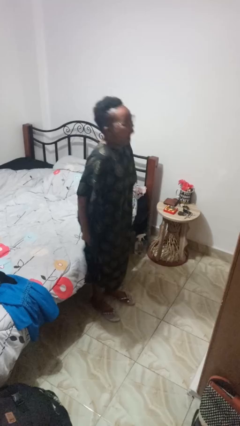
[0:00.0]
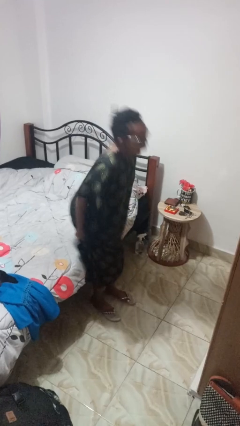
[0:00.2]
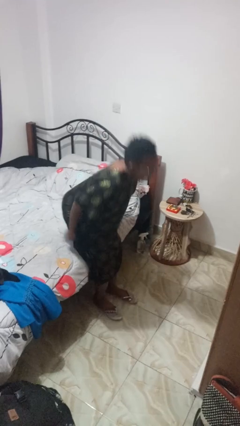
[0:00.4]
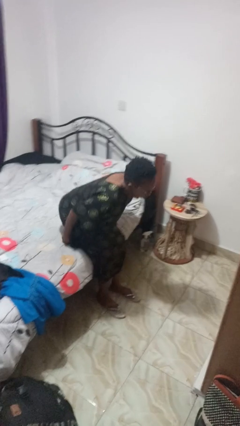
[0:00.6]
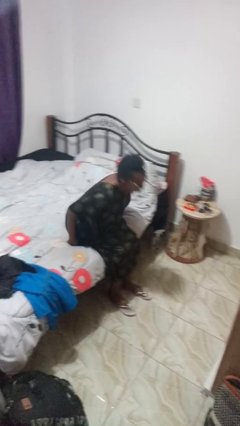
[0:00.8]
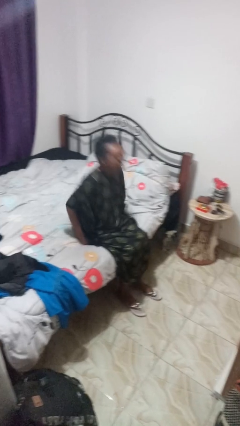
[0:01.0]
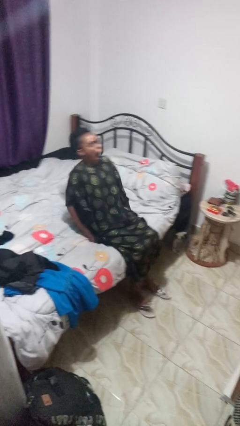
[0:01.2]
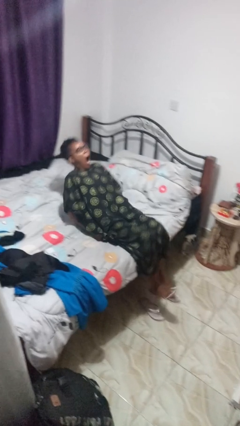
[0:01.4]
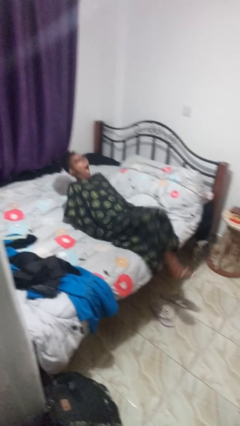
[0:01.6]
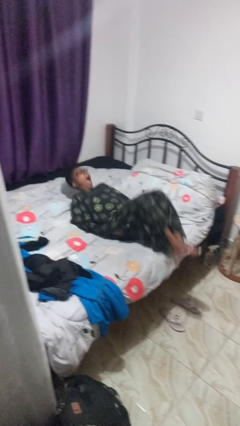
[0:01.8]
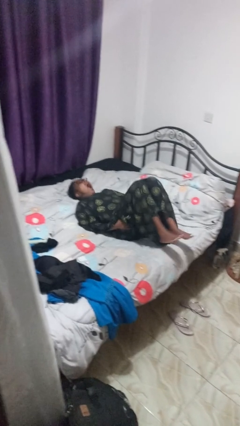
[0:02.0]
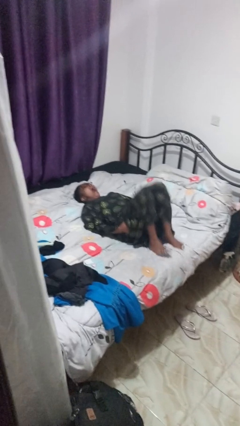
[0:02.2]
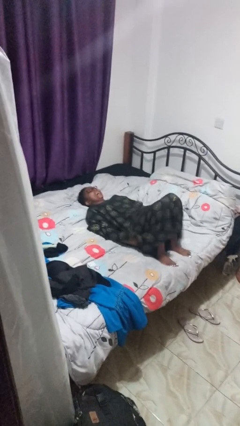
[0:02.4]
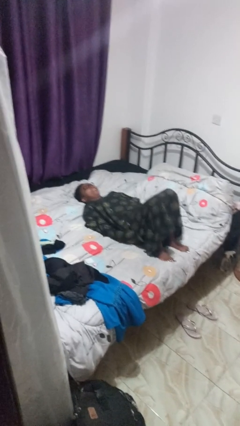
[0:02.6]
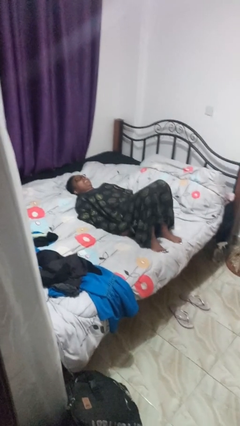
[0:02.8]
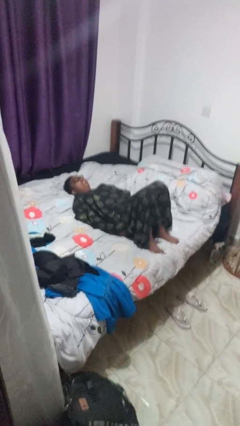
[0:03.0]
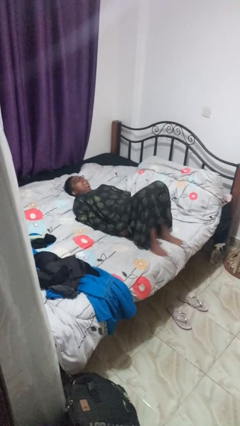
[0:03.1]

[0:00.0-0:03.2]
person lies down on bed

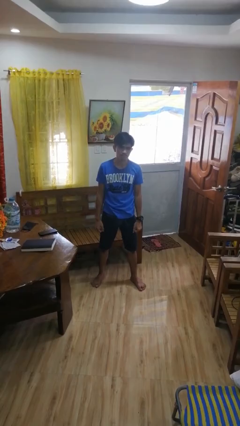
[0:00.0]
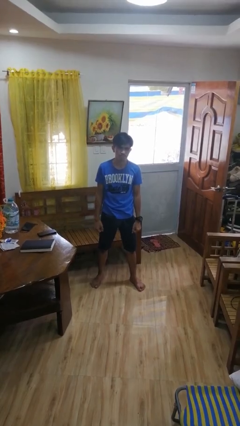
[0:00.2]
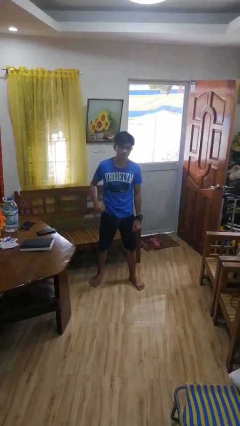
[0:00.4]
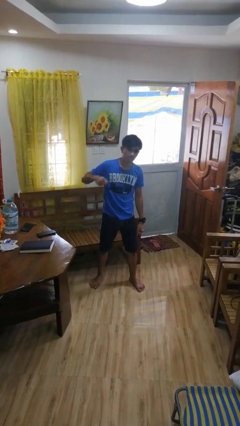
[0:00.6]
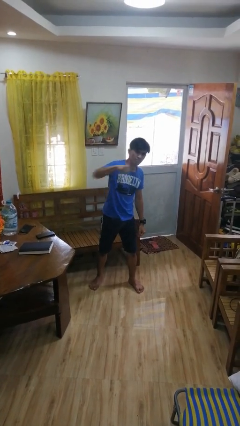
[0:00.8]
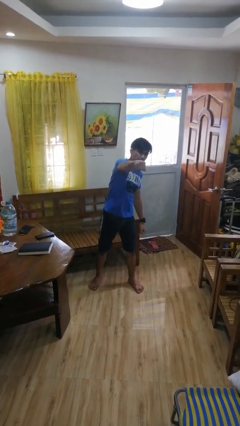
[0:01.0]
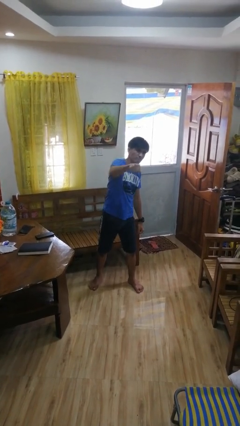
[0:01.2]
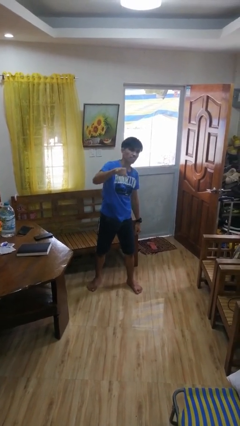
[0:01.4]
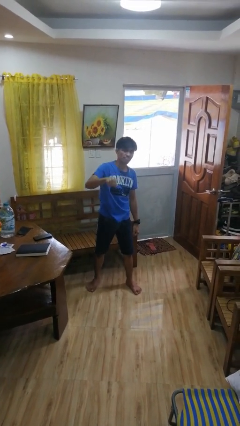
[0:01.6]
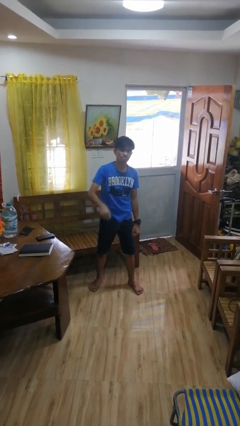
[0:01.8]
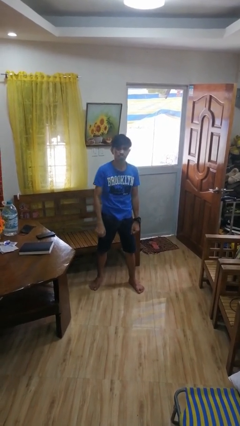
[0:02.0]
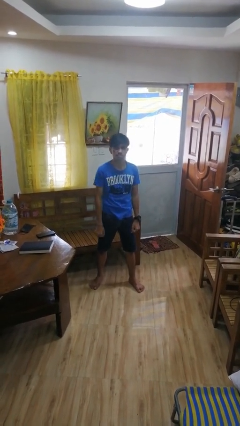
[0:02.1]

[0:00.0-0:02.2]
person punches

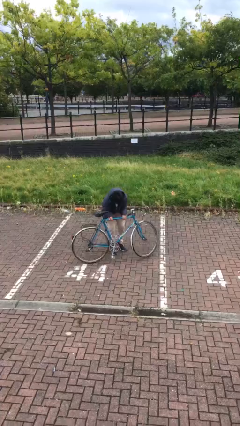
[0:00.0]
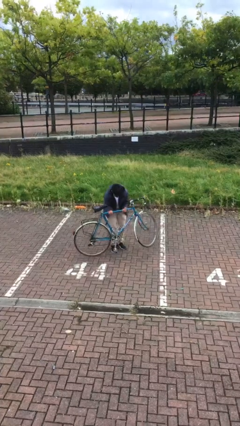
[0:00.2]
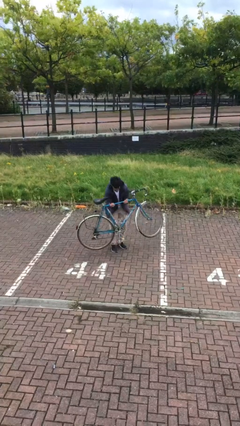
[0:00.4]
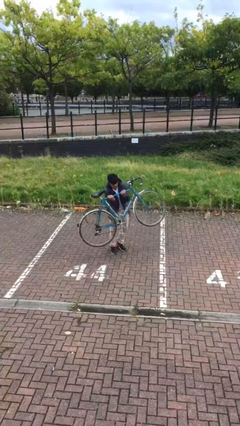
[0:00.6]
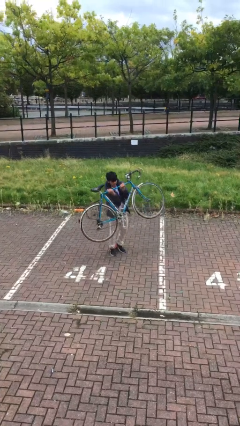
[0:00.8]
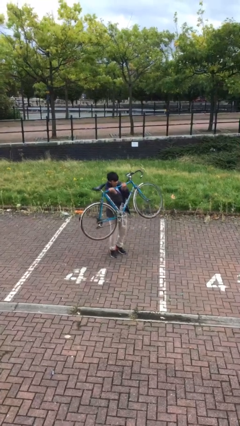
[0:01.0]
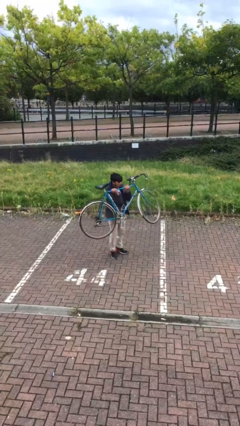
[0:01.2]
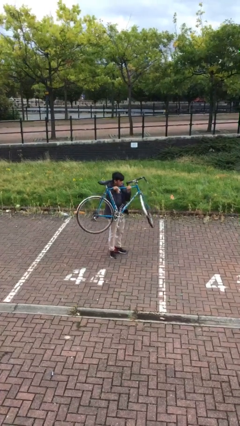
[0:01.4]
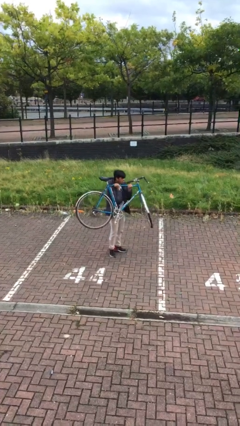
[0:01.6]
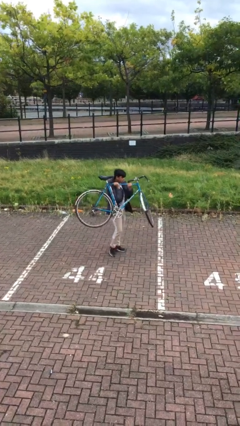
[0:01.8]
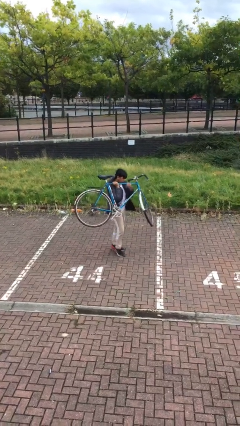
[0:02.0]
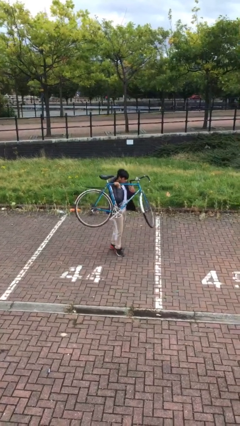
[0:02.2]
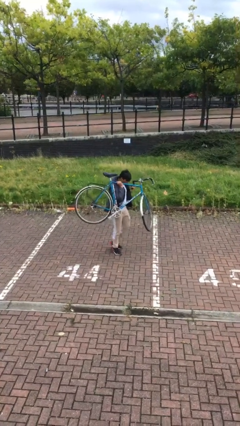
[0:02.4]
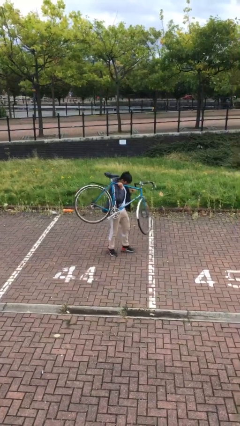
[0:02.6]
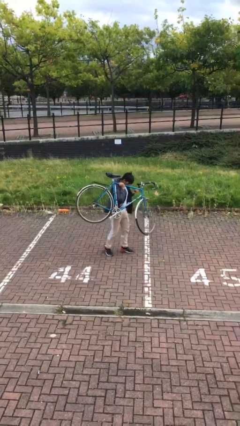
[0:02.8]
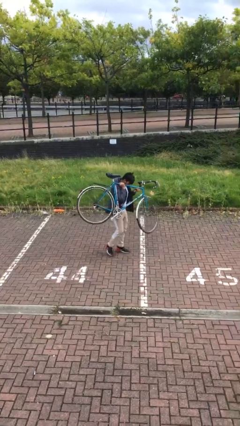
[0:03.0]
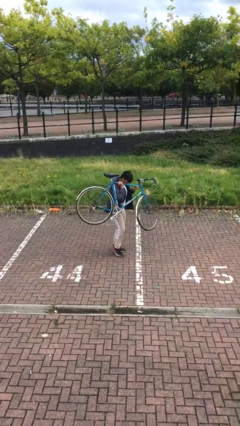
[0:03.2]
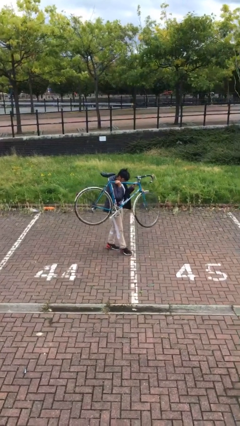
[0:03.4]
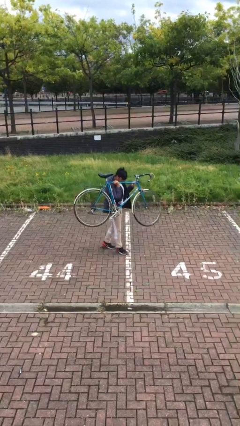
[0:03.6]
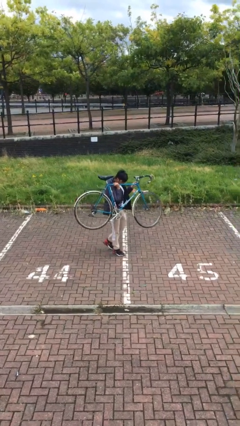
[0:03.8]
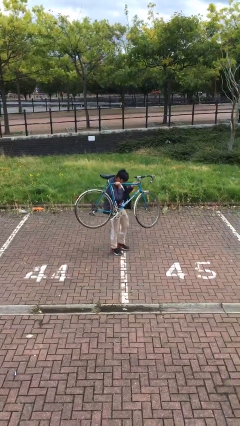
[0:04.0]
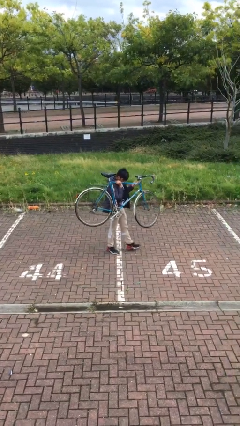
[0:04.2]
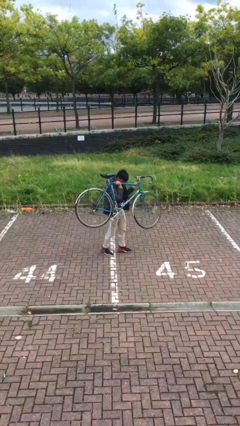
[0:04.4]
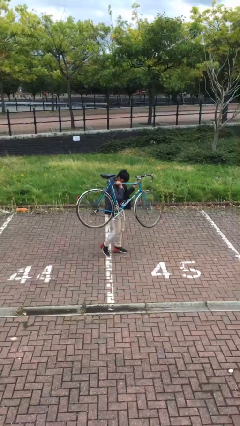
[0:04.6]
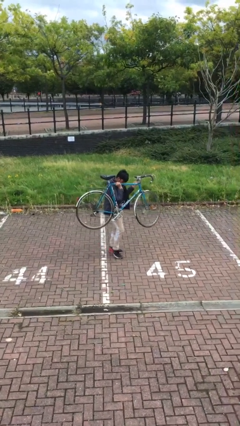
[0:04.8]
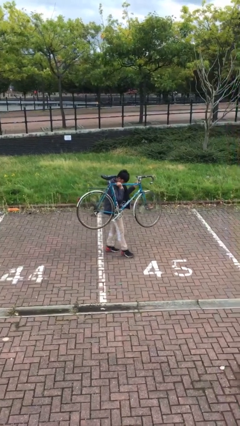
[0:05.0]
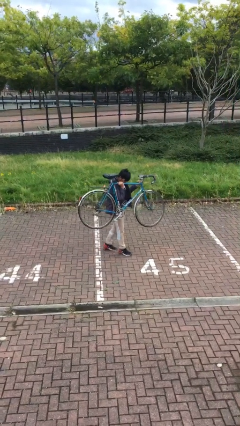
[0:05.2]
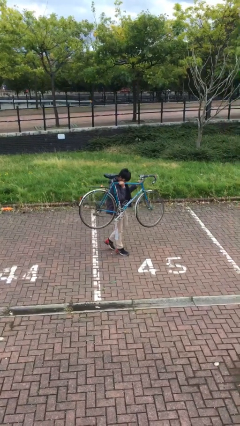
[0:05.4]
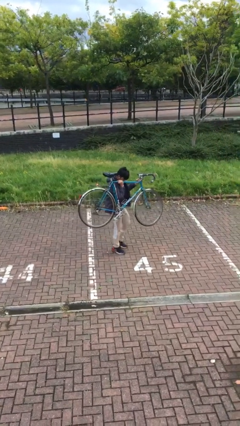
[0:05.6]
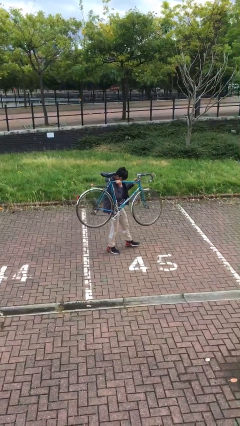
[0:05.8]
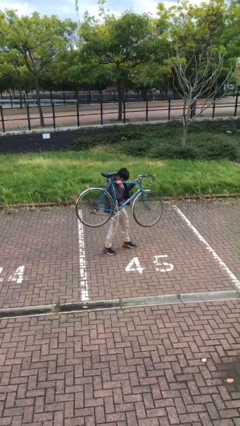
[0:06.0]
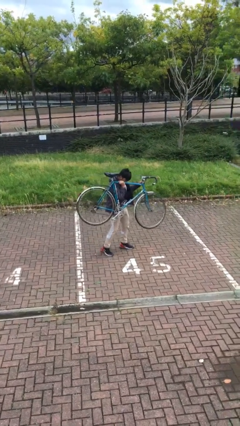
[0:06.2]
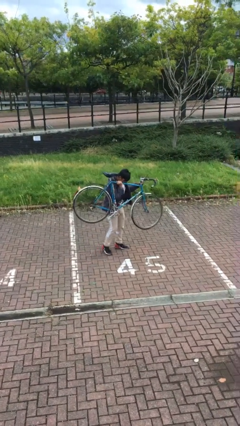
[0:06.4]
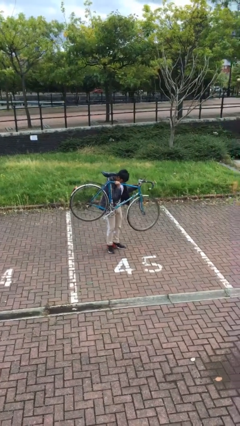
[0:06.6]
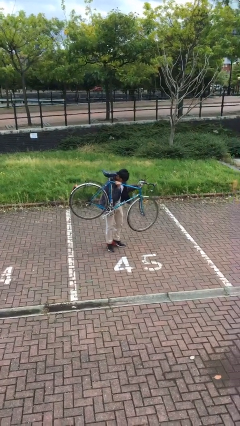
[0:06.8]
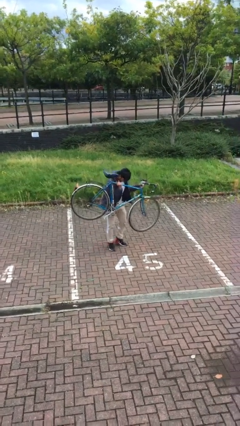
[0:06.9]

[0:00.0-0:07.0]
person carries heavy object

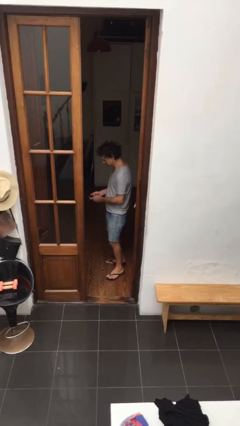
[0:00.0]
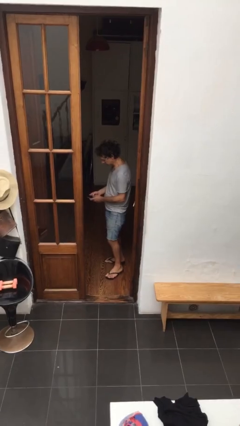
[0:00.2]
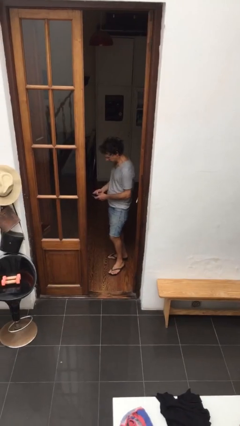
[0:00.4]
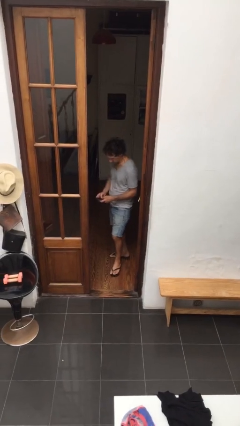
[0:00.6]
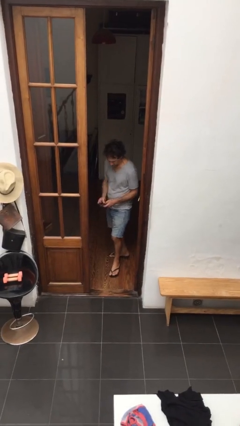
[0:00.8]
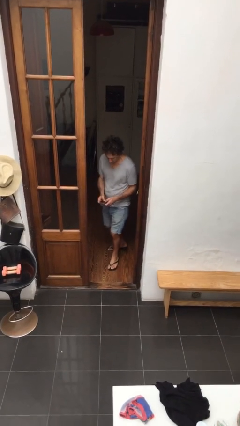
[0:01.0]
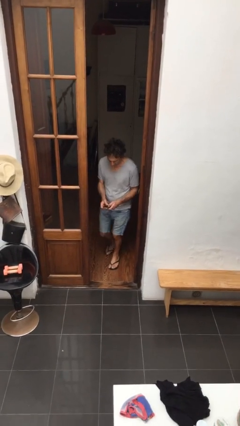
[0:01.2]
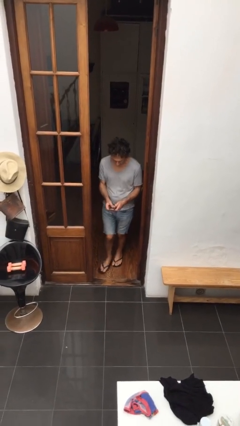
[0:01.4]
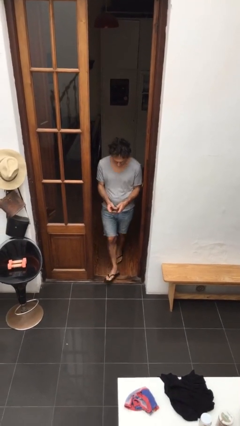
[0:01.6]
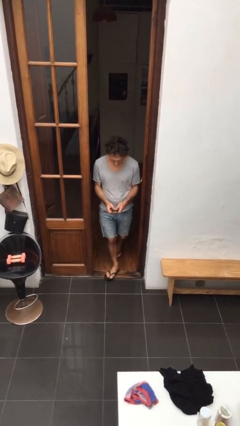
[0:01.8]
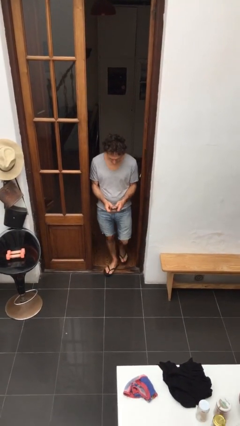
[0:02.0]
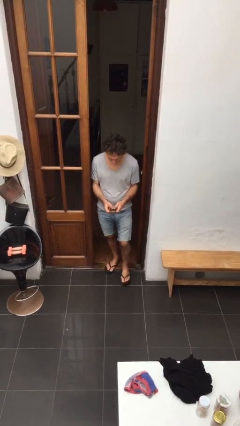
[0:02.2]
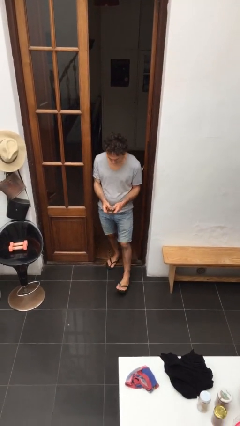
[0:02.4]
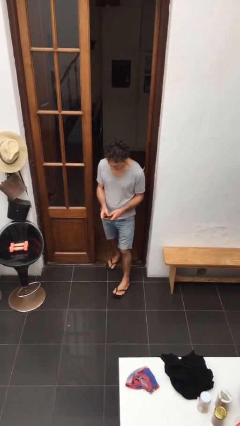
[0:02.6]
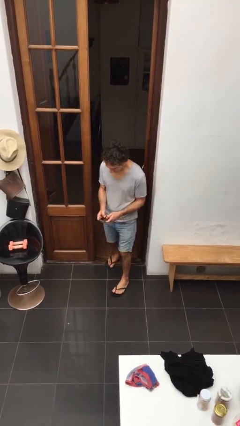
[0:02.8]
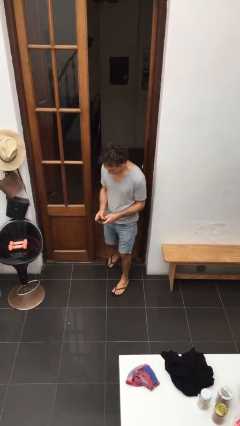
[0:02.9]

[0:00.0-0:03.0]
person enters scene through structure

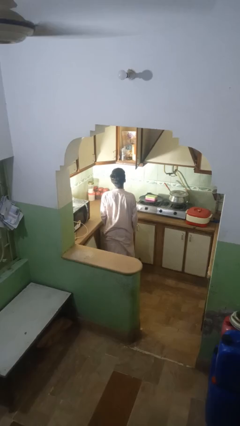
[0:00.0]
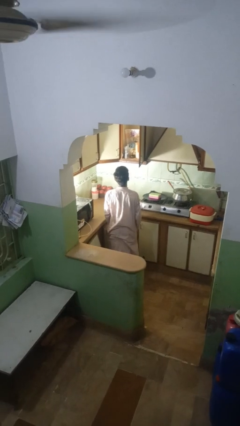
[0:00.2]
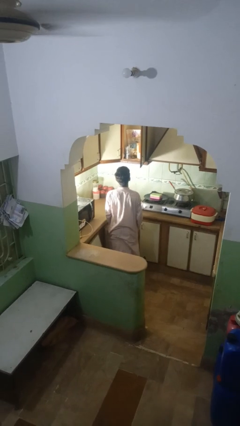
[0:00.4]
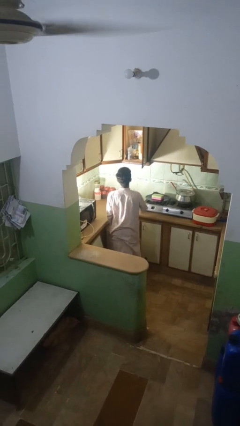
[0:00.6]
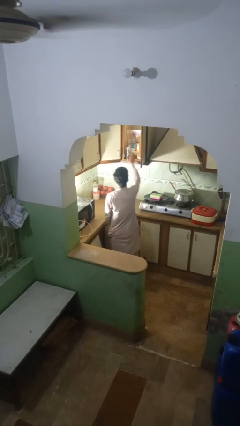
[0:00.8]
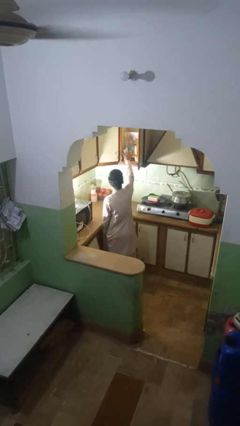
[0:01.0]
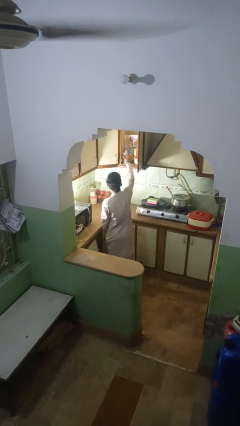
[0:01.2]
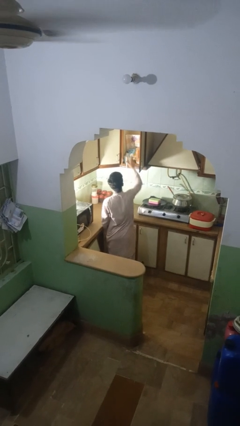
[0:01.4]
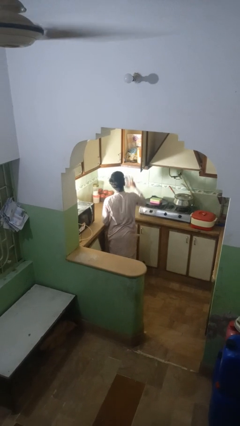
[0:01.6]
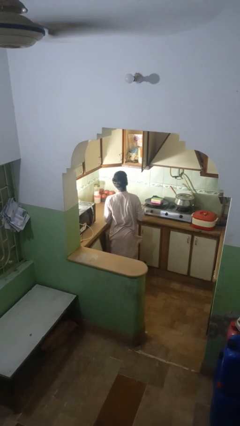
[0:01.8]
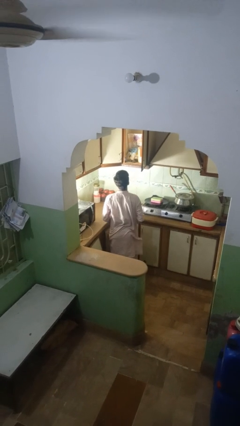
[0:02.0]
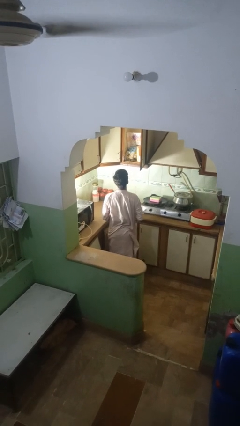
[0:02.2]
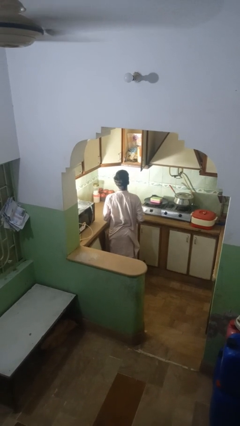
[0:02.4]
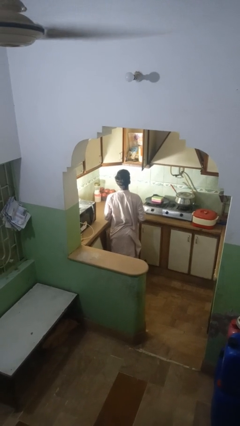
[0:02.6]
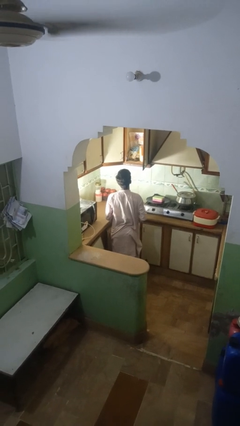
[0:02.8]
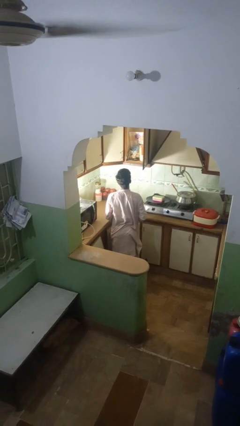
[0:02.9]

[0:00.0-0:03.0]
person takes object from kitchen drawer
